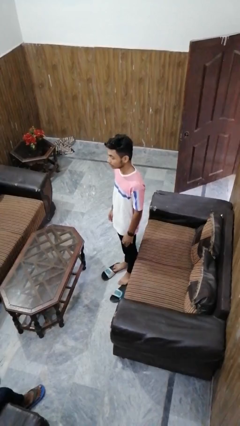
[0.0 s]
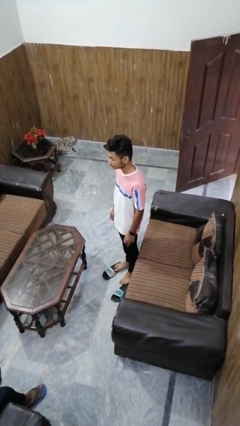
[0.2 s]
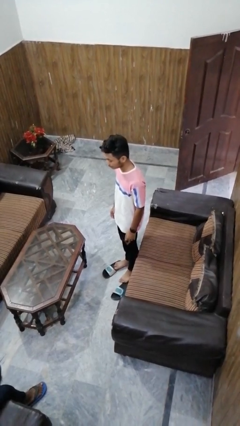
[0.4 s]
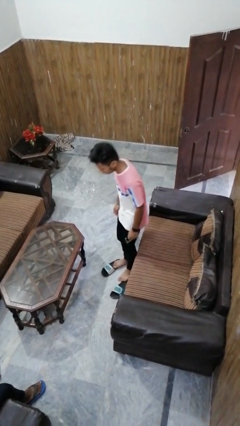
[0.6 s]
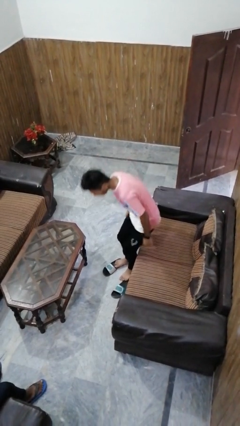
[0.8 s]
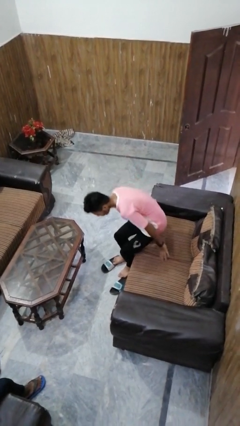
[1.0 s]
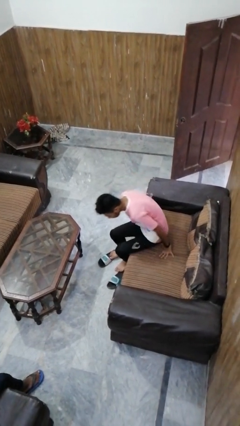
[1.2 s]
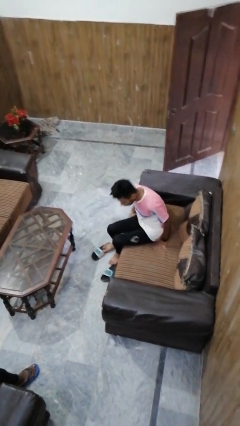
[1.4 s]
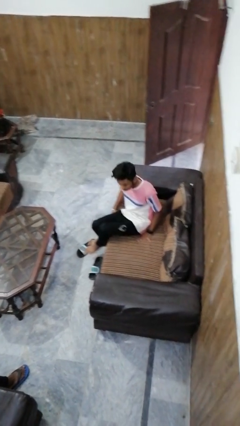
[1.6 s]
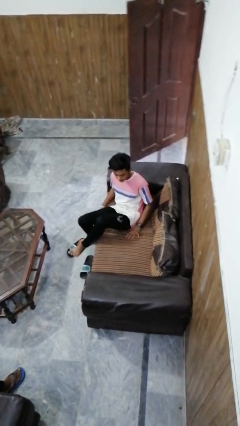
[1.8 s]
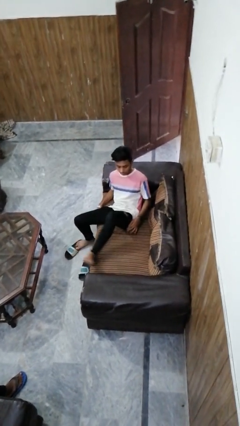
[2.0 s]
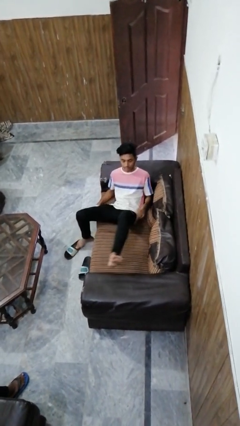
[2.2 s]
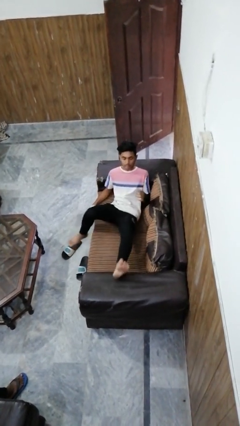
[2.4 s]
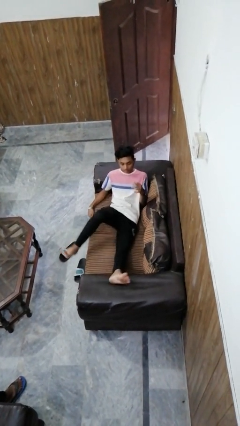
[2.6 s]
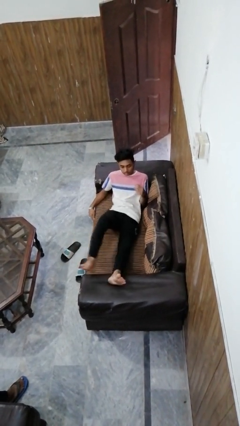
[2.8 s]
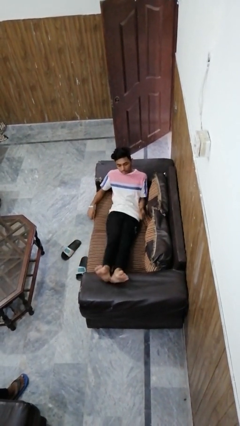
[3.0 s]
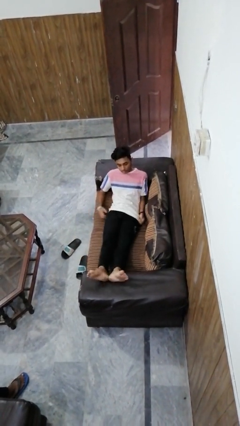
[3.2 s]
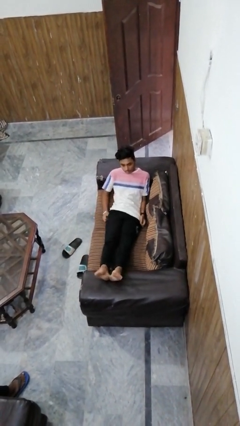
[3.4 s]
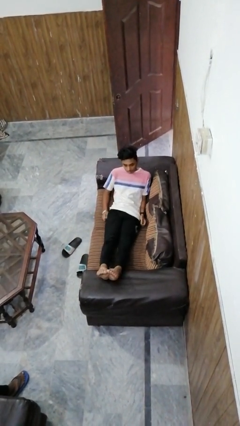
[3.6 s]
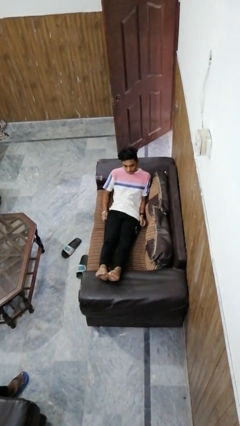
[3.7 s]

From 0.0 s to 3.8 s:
person lies down on couch

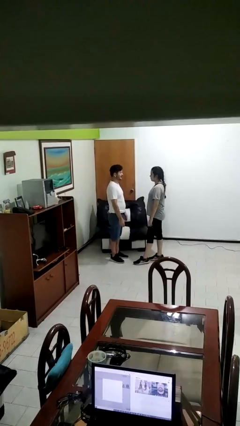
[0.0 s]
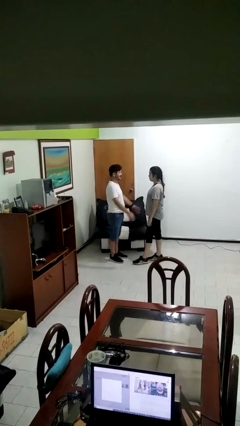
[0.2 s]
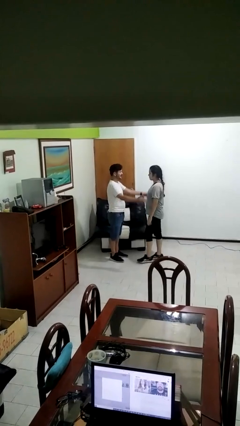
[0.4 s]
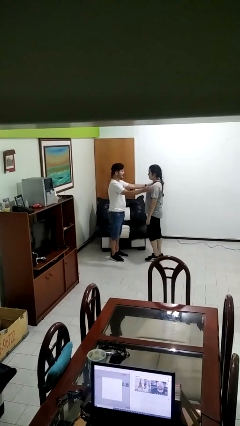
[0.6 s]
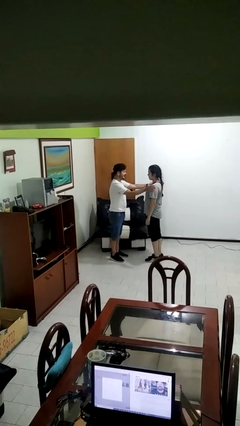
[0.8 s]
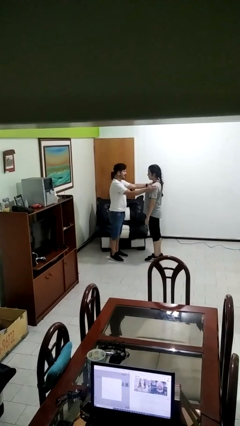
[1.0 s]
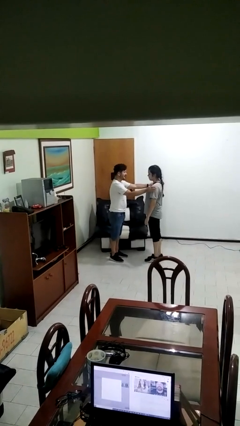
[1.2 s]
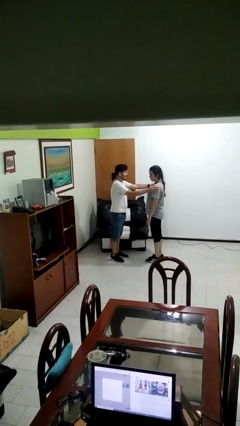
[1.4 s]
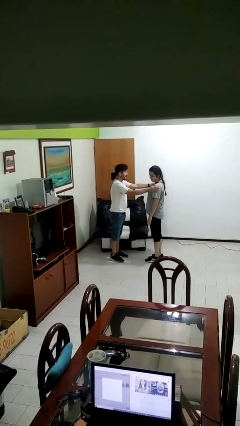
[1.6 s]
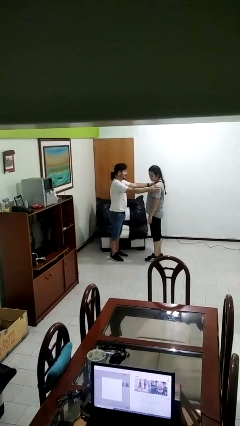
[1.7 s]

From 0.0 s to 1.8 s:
person pounds shoulders of person

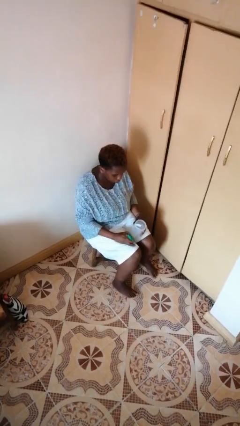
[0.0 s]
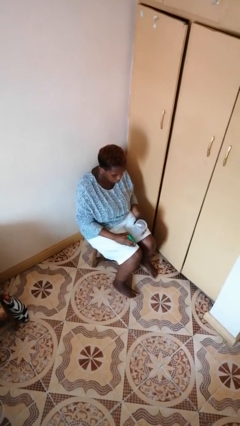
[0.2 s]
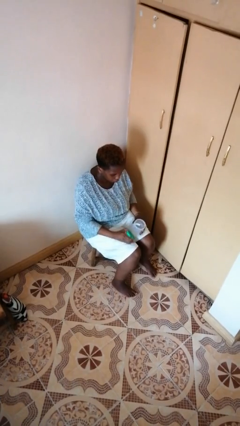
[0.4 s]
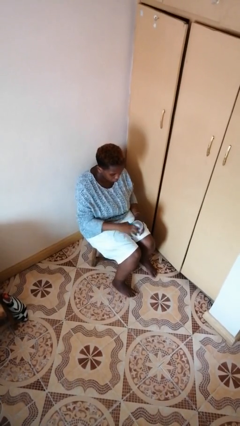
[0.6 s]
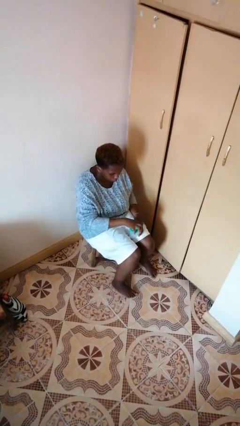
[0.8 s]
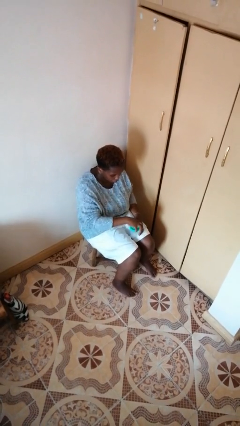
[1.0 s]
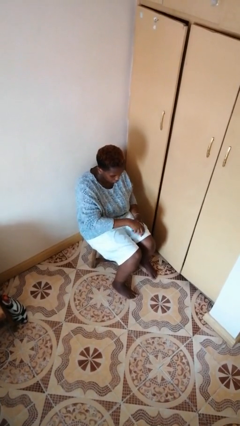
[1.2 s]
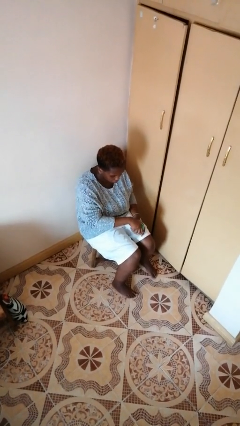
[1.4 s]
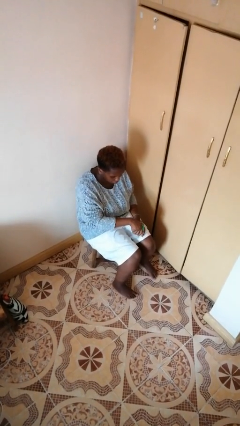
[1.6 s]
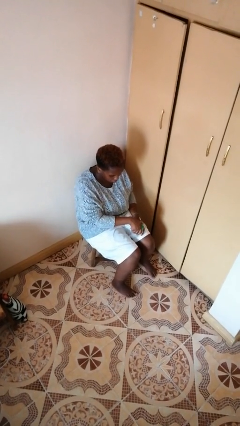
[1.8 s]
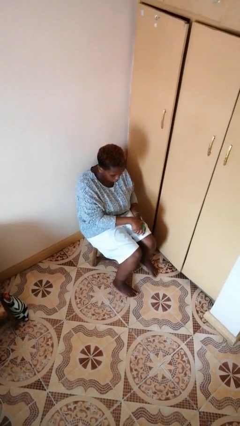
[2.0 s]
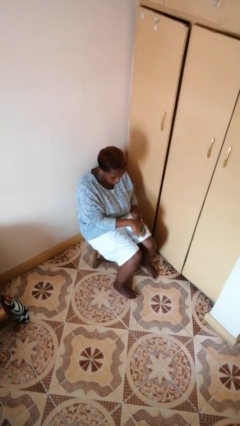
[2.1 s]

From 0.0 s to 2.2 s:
person closes jar

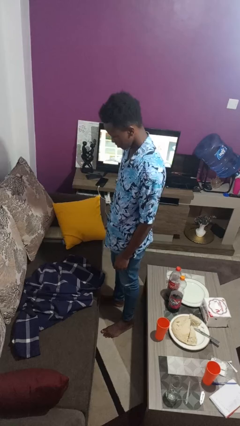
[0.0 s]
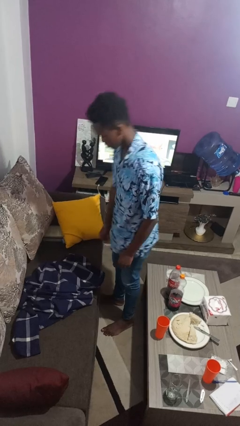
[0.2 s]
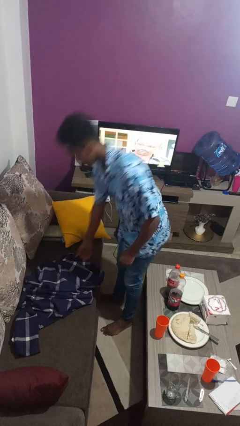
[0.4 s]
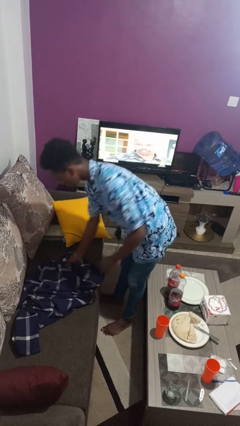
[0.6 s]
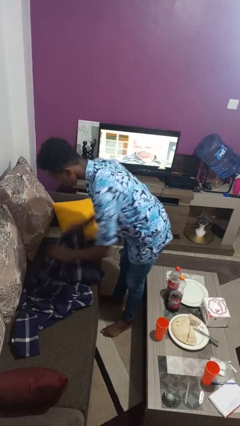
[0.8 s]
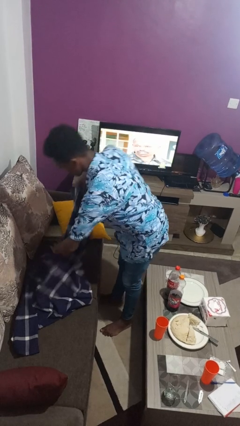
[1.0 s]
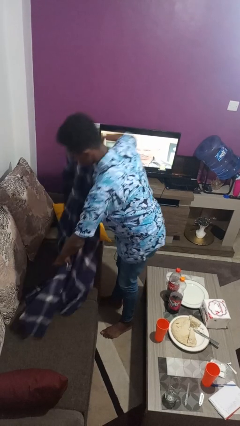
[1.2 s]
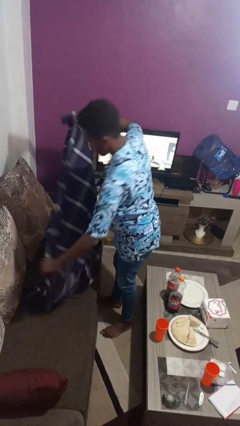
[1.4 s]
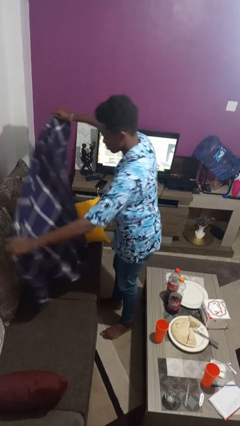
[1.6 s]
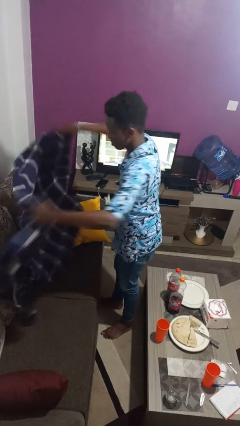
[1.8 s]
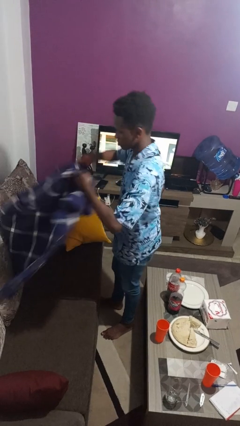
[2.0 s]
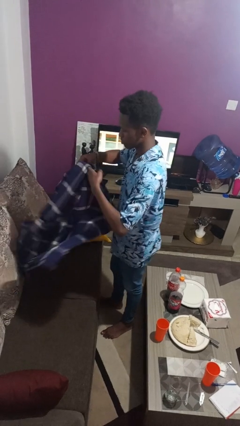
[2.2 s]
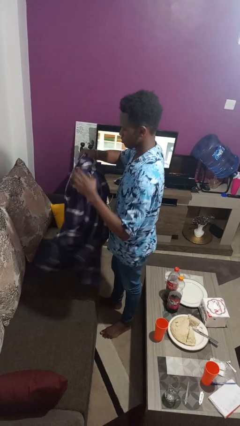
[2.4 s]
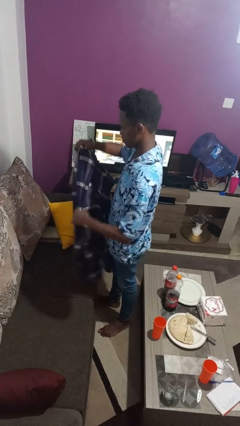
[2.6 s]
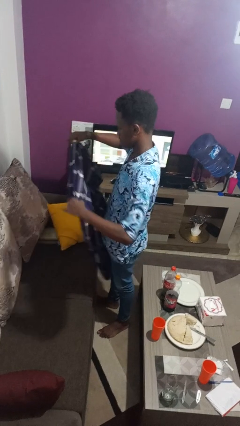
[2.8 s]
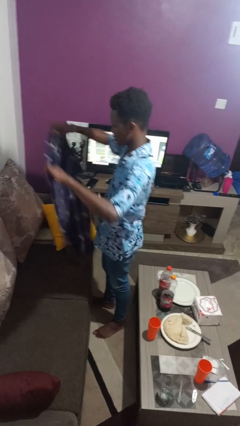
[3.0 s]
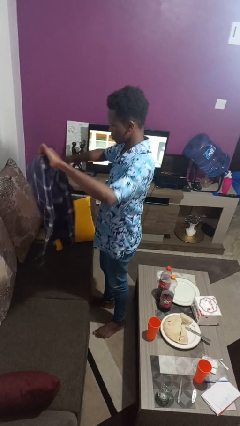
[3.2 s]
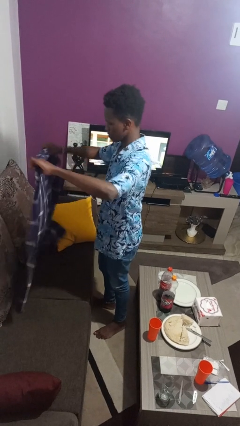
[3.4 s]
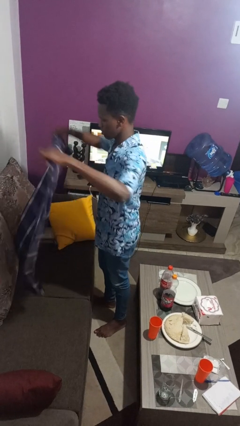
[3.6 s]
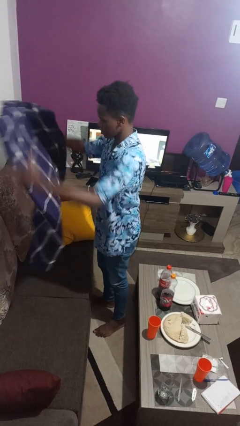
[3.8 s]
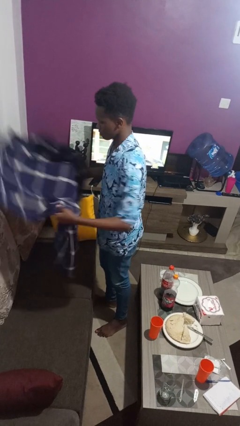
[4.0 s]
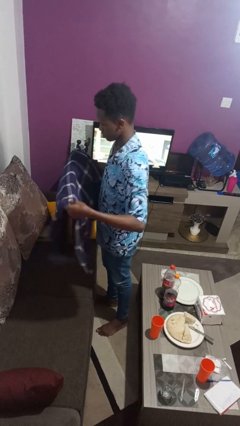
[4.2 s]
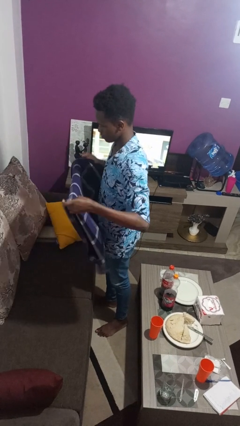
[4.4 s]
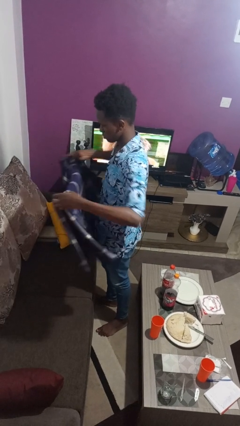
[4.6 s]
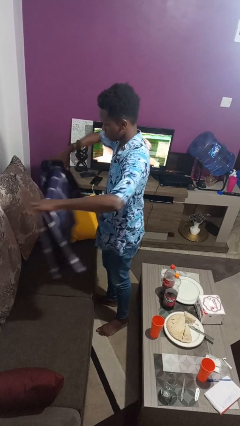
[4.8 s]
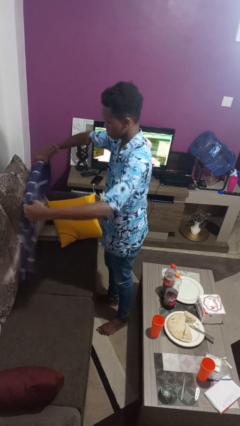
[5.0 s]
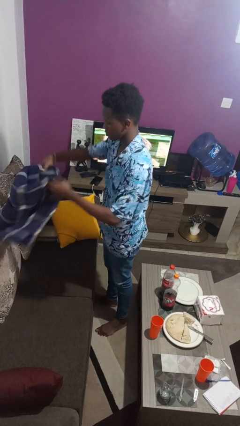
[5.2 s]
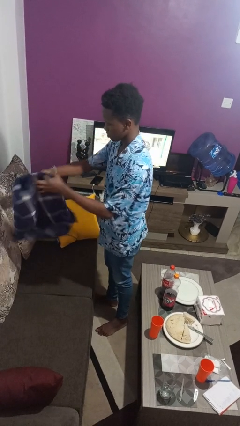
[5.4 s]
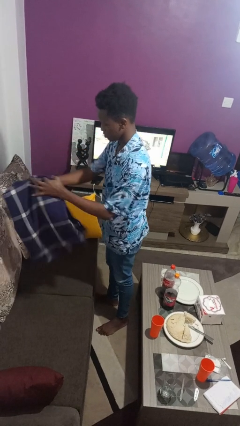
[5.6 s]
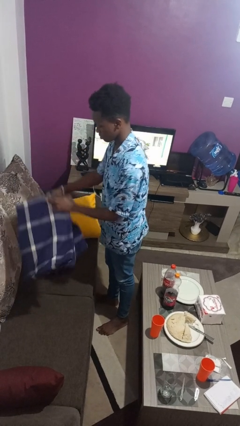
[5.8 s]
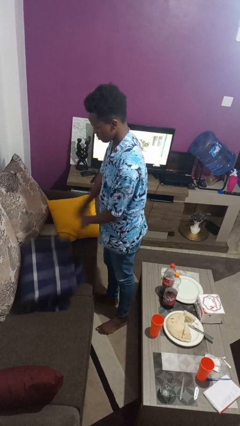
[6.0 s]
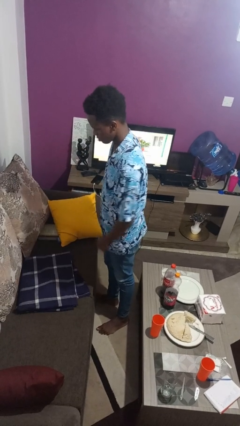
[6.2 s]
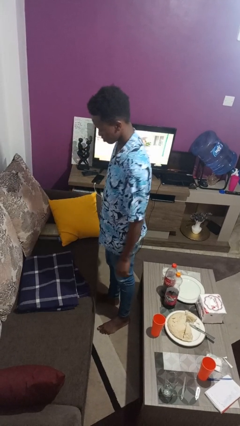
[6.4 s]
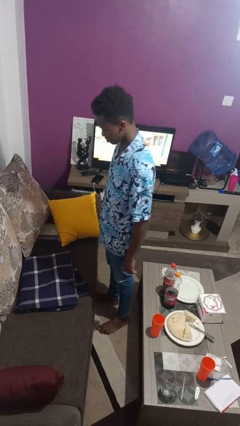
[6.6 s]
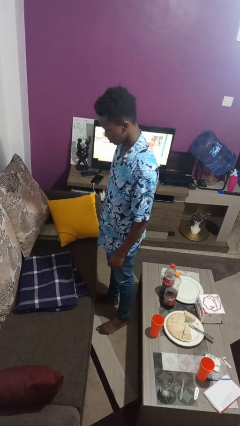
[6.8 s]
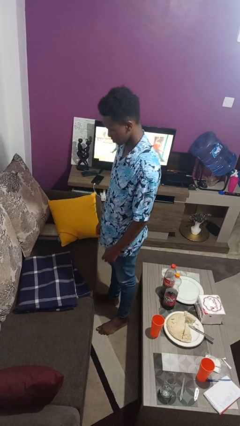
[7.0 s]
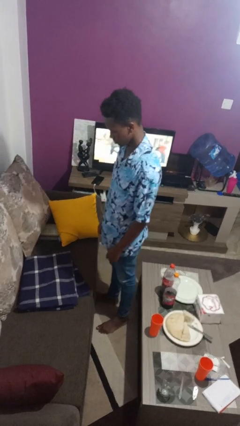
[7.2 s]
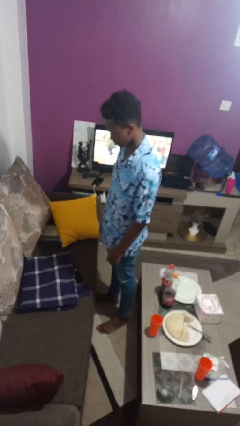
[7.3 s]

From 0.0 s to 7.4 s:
person folds blanket

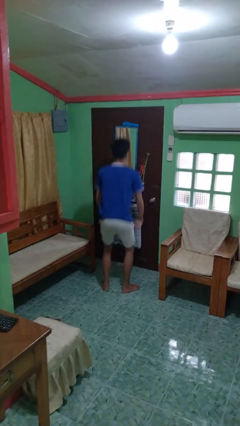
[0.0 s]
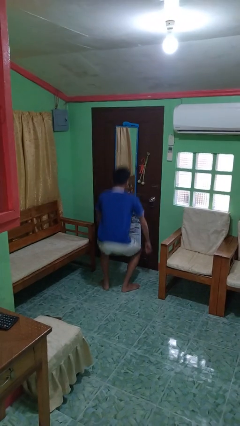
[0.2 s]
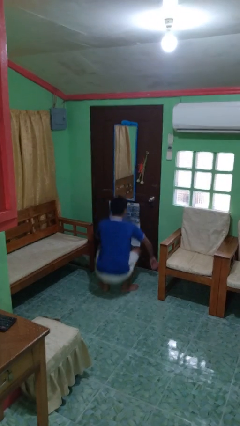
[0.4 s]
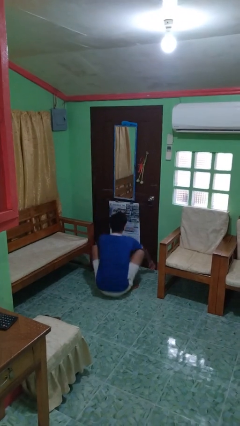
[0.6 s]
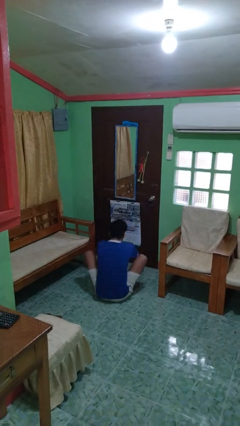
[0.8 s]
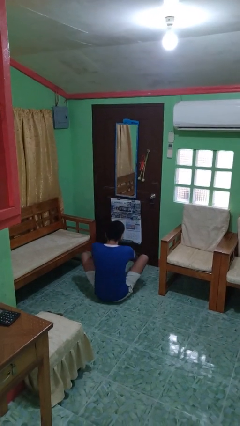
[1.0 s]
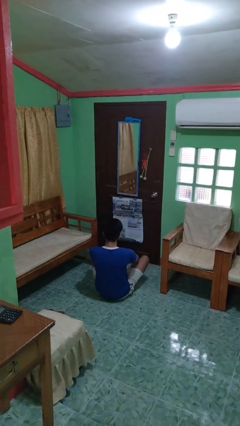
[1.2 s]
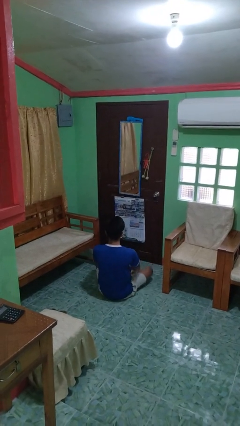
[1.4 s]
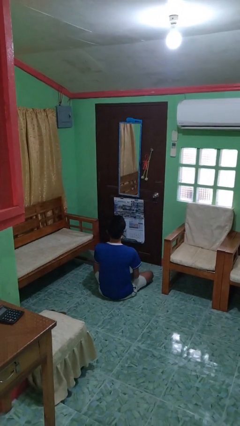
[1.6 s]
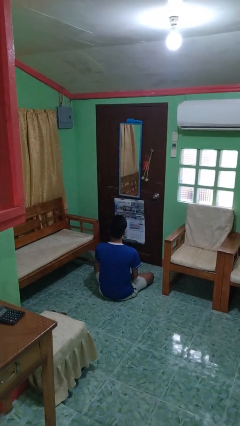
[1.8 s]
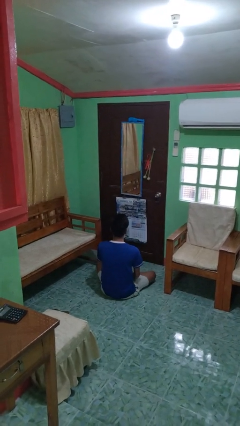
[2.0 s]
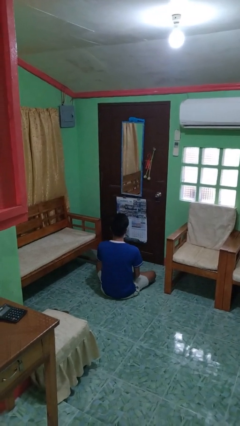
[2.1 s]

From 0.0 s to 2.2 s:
person squats
